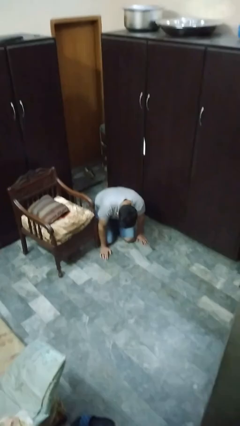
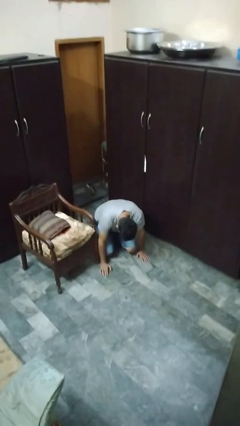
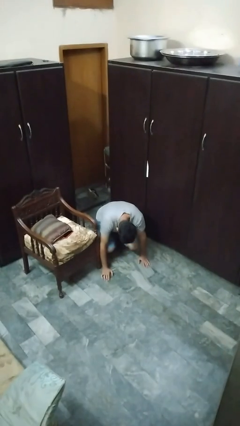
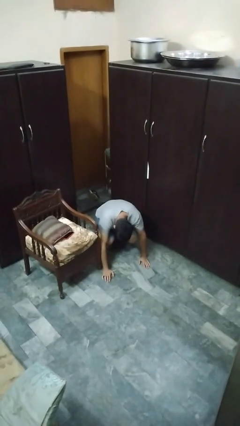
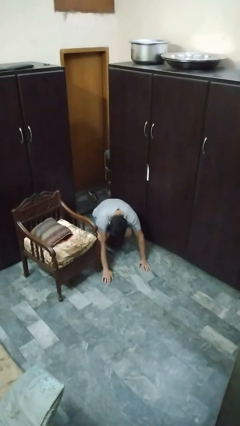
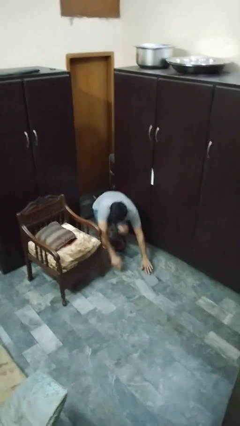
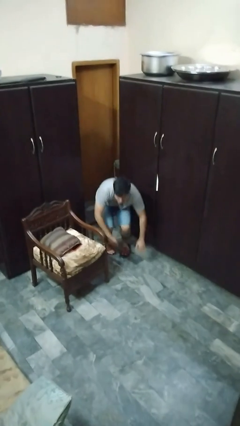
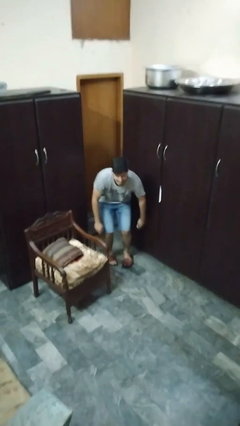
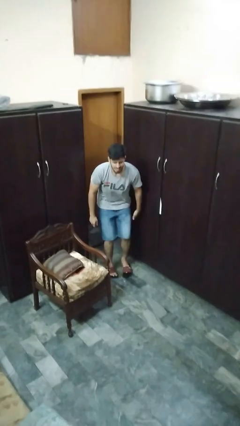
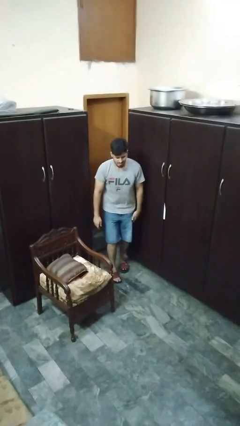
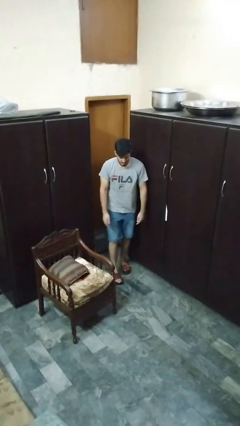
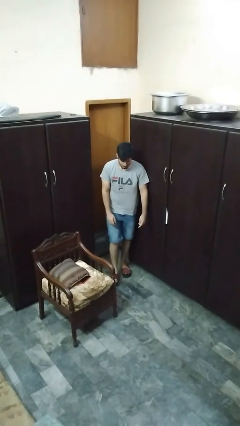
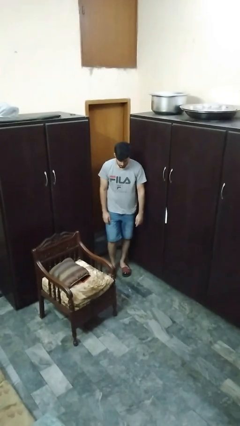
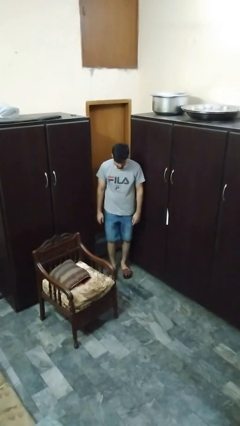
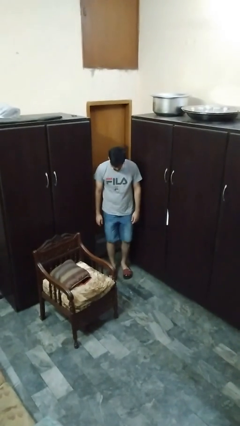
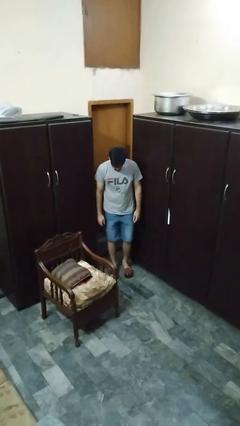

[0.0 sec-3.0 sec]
person stands up from floor

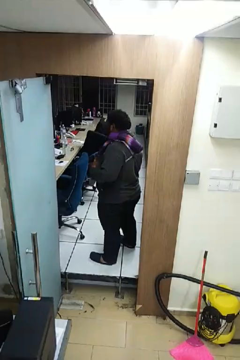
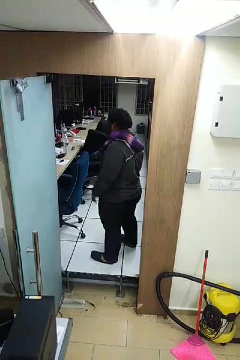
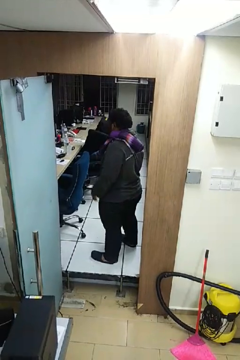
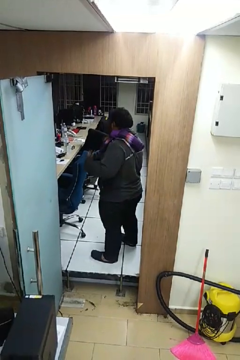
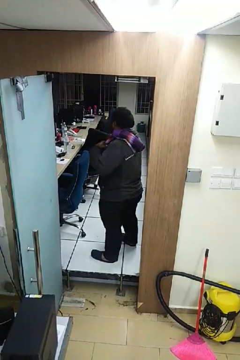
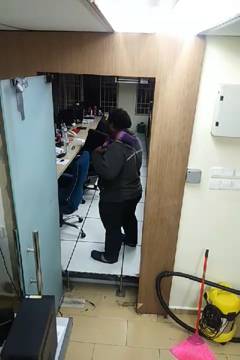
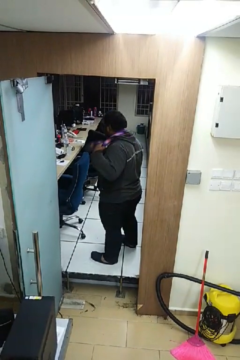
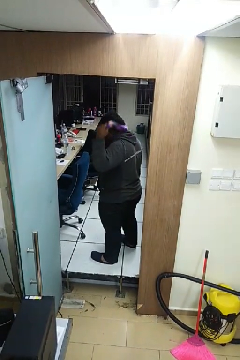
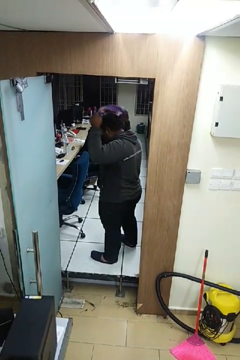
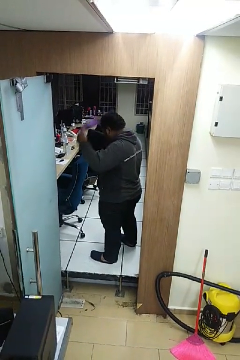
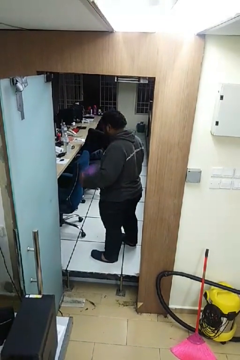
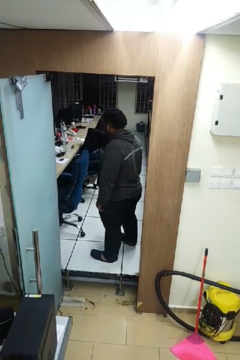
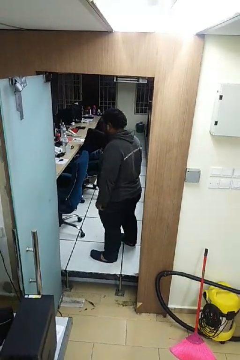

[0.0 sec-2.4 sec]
person takes off scarf

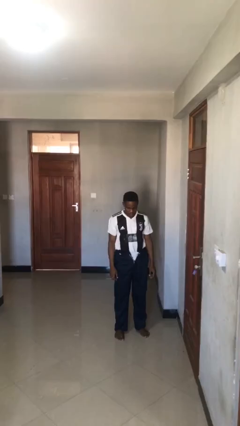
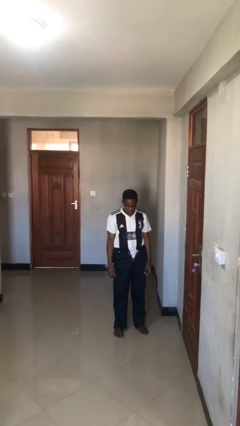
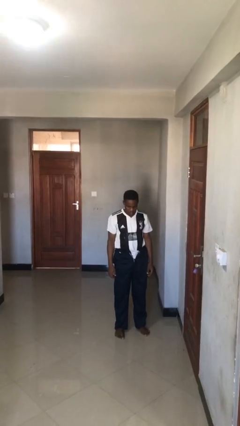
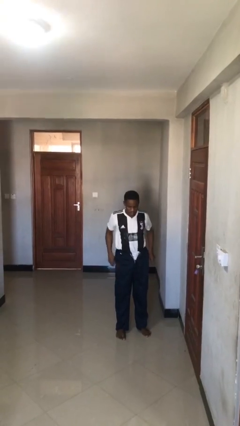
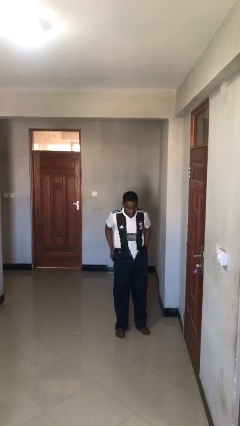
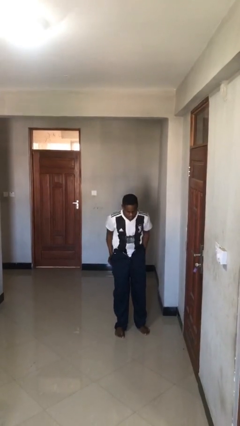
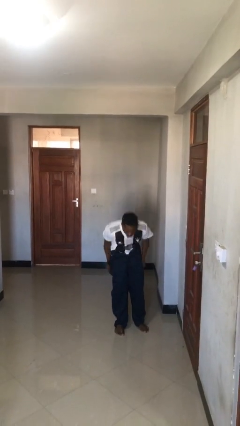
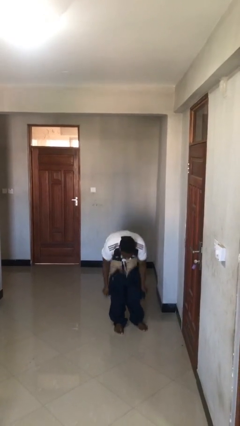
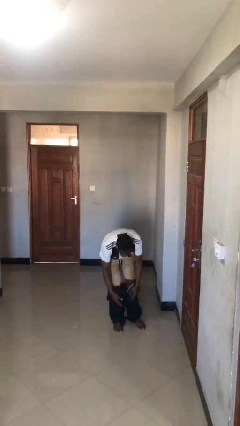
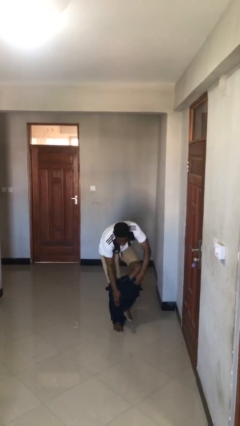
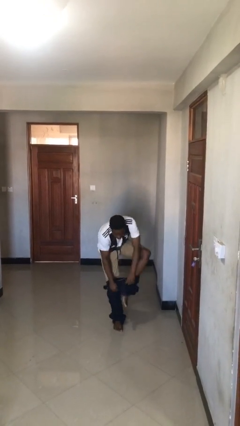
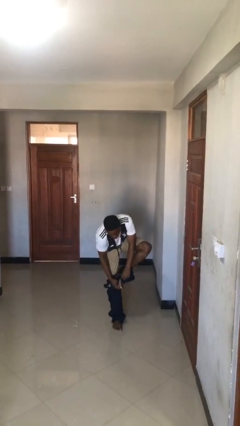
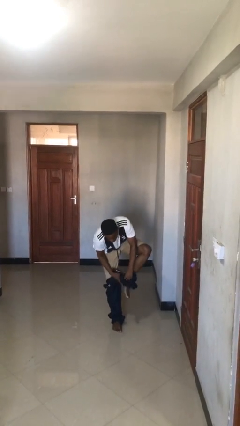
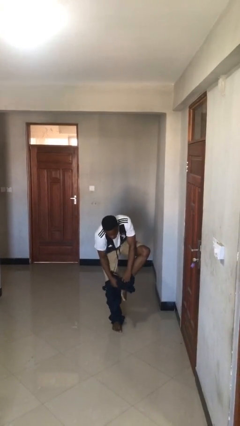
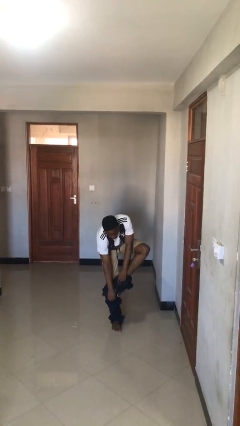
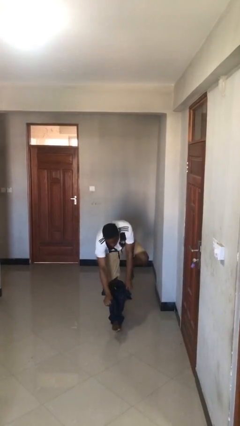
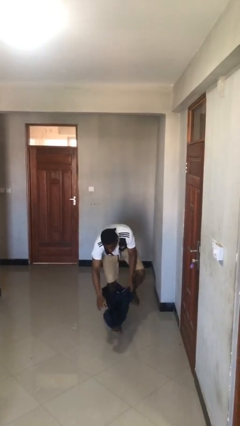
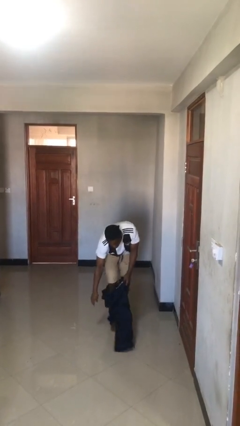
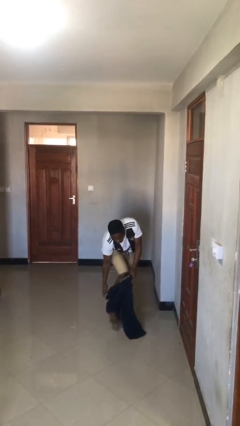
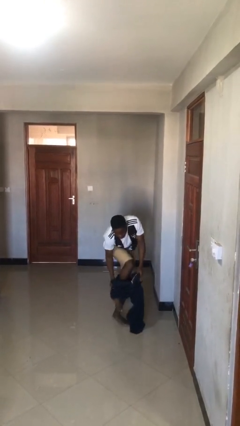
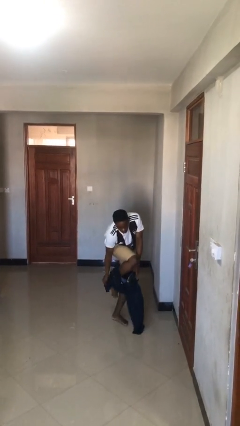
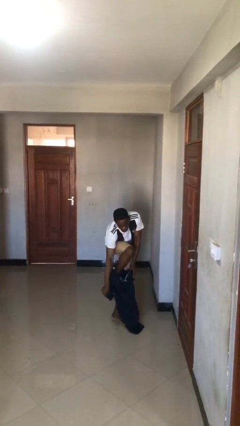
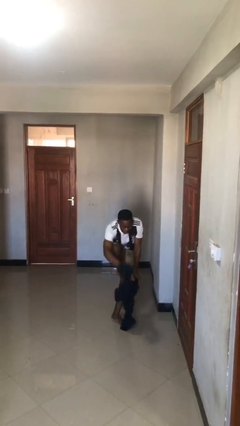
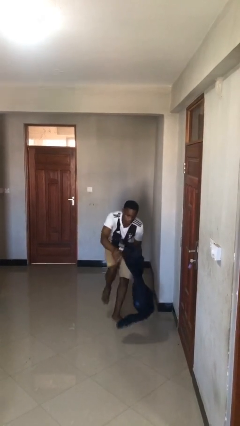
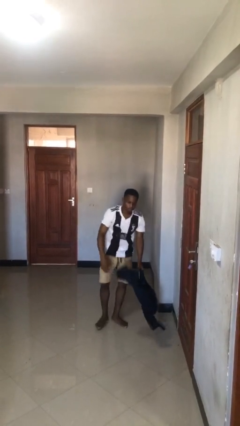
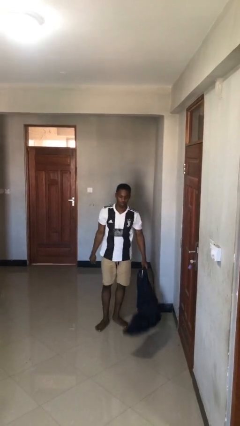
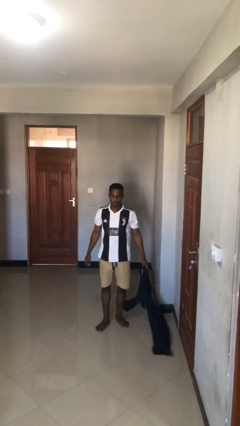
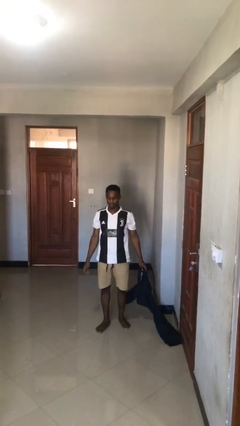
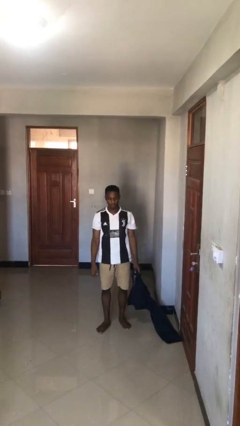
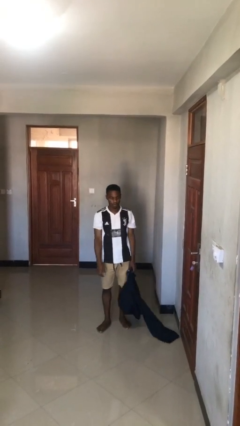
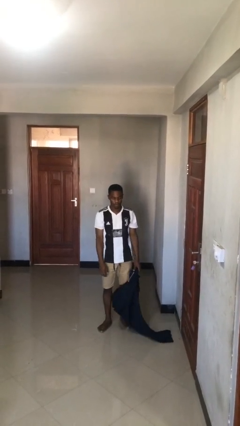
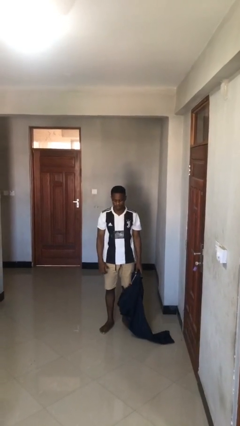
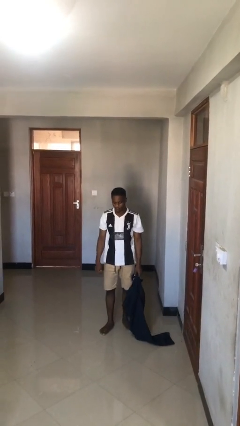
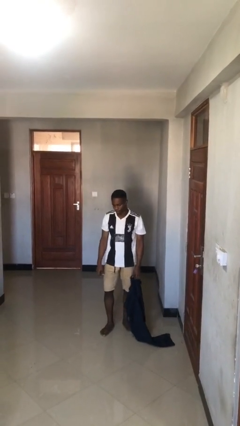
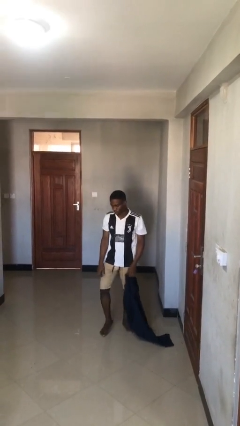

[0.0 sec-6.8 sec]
person takes off pants

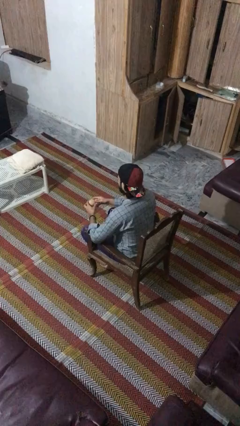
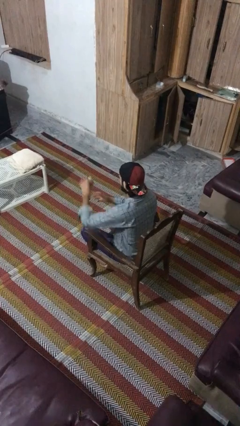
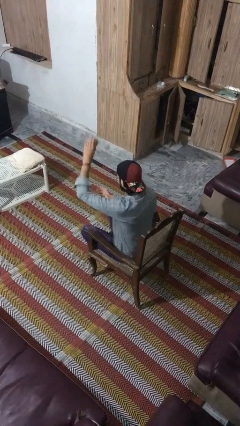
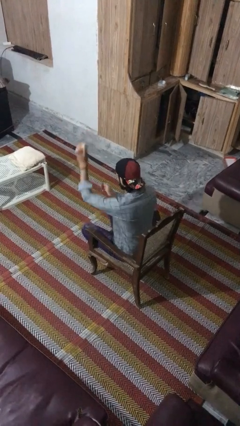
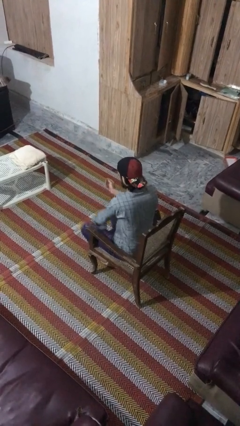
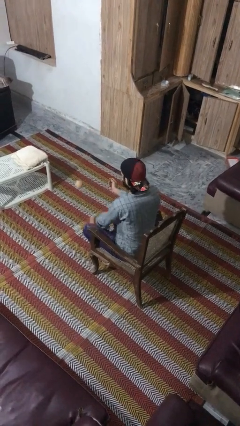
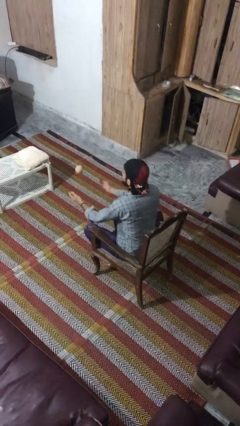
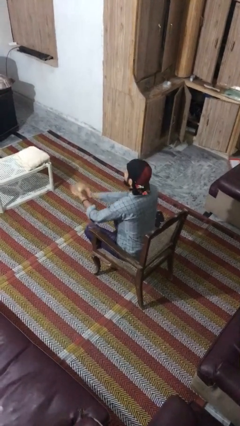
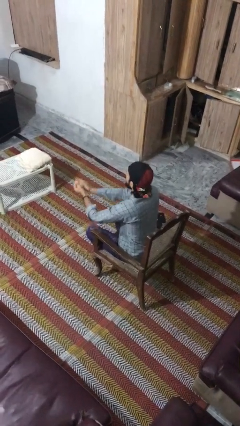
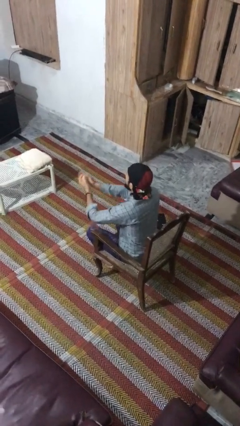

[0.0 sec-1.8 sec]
person bounces ball on floor

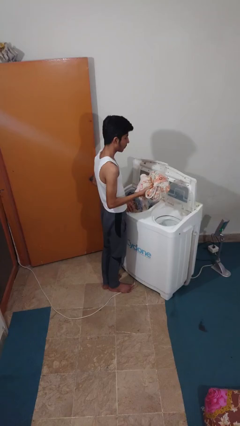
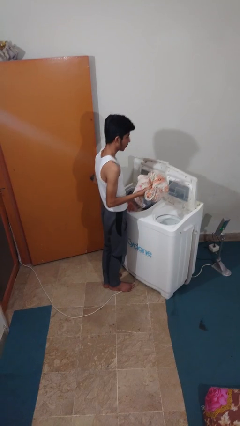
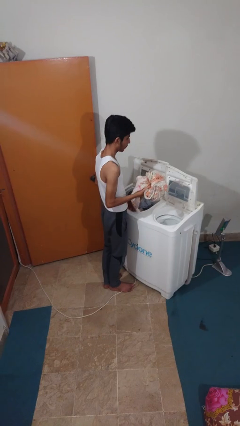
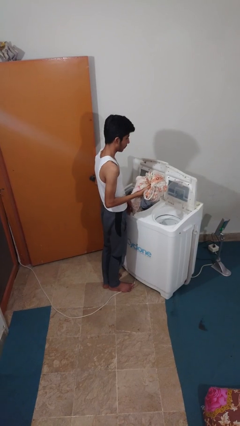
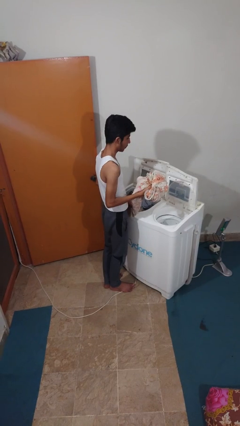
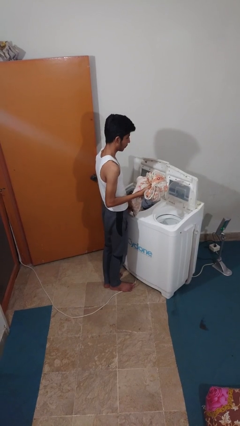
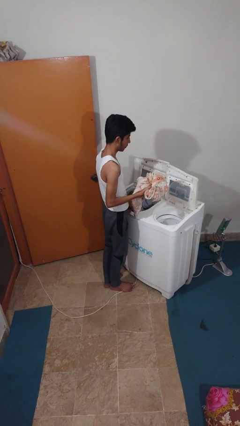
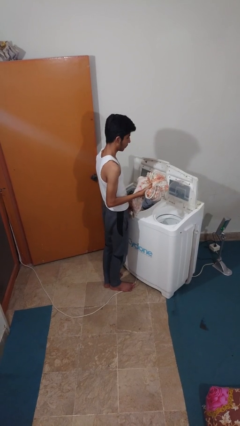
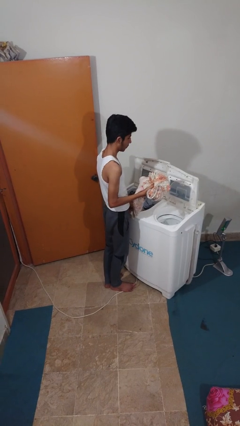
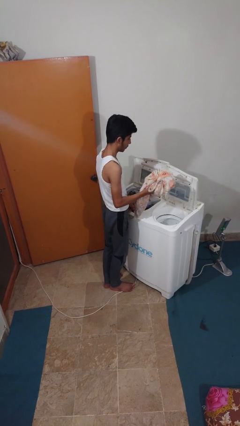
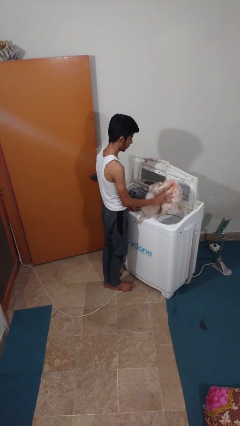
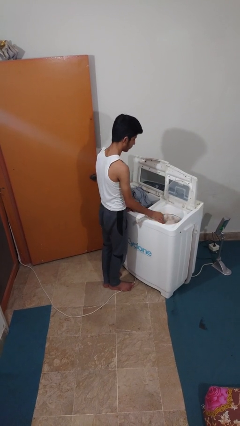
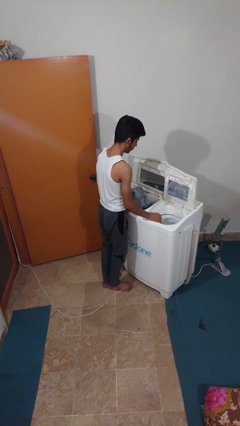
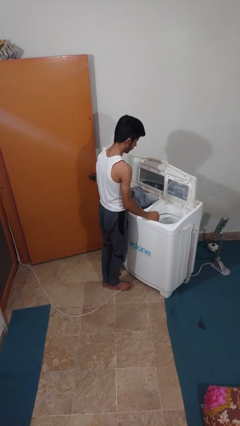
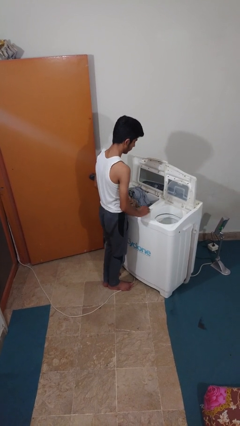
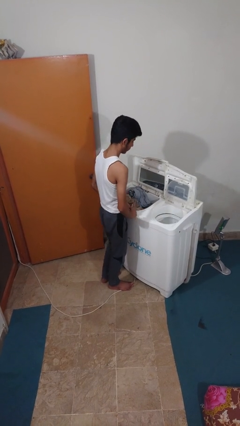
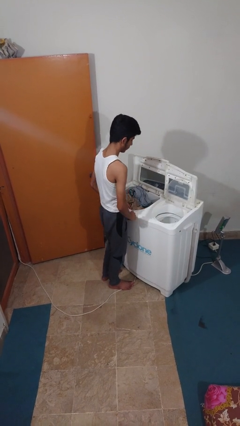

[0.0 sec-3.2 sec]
person loads dryer

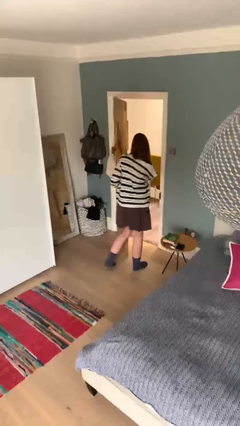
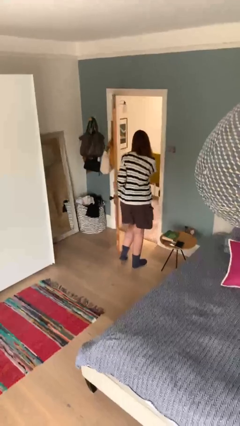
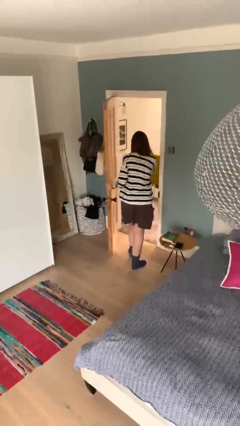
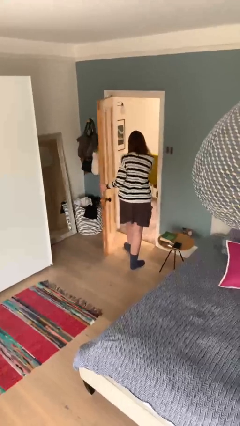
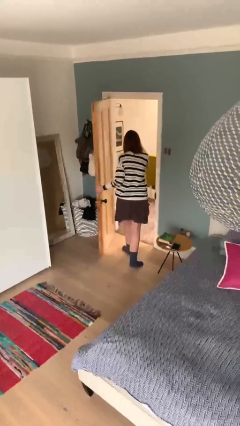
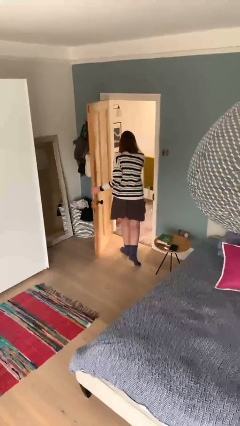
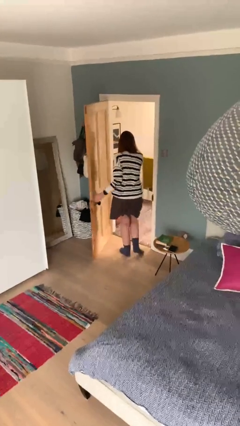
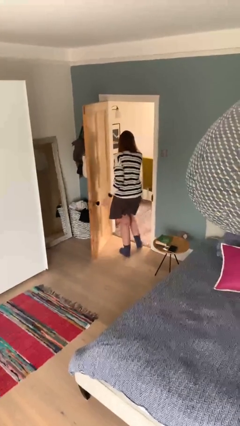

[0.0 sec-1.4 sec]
person exits scene through structure
